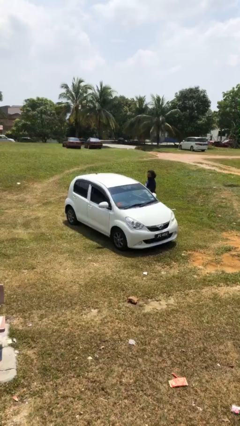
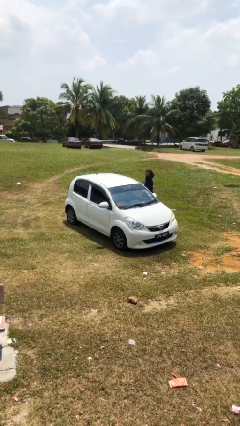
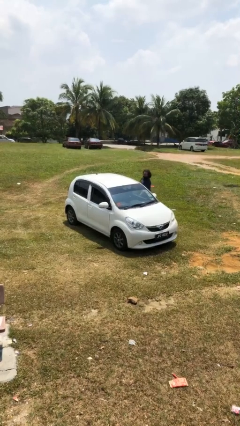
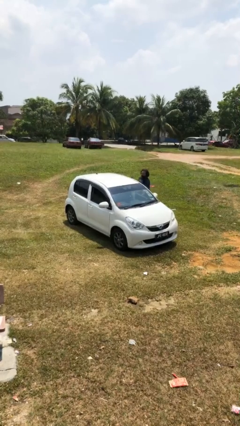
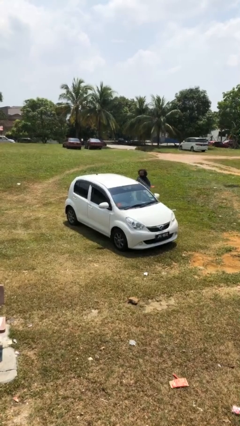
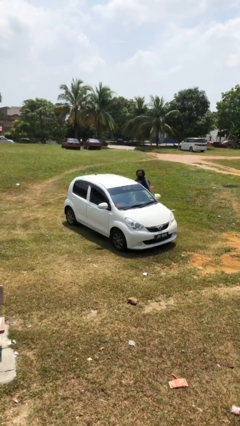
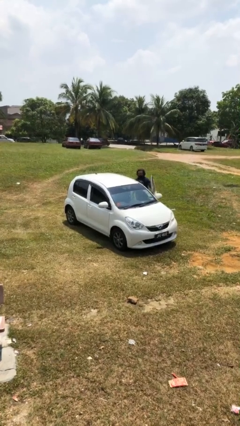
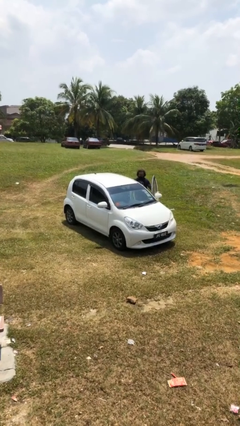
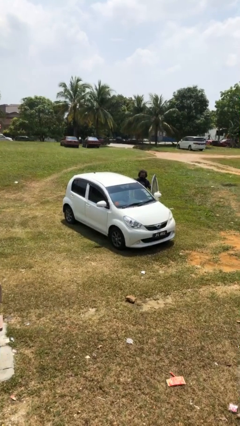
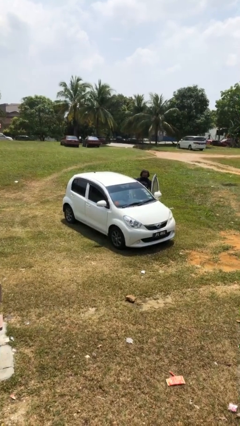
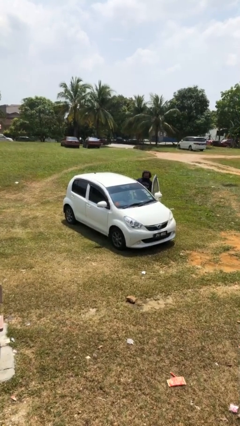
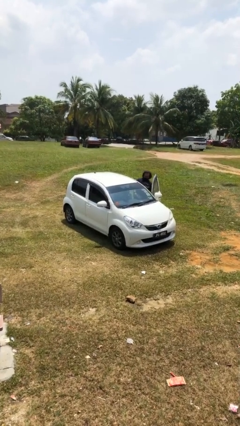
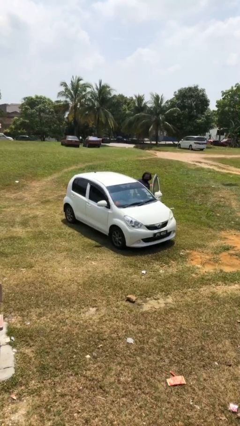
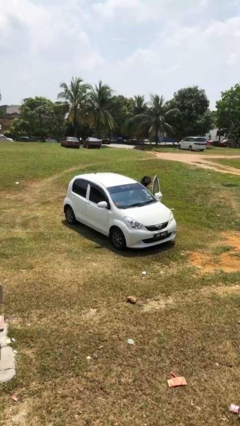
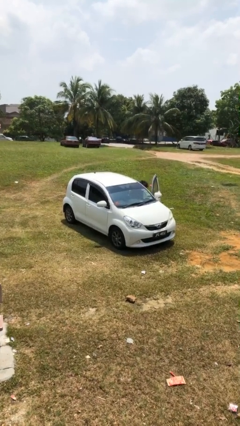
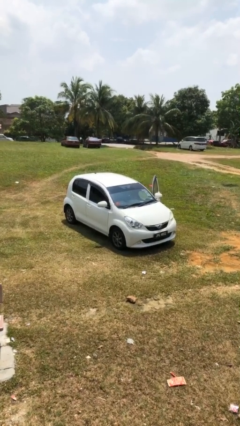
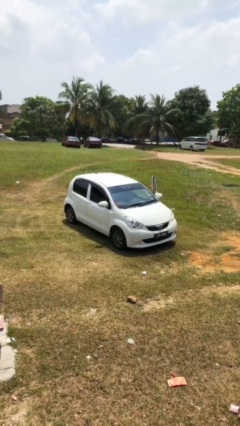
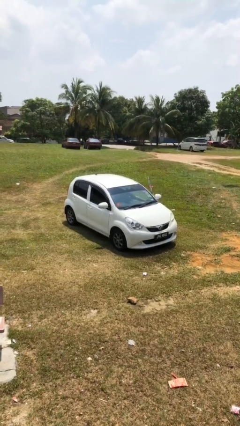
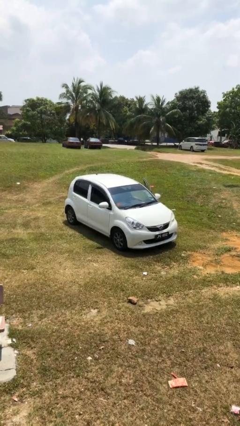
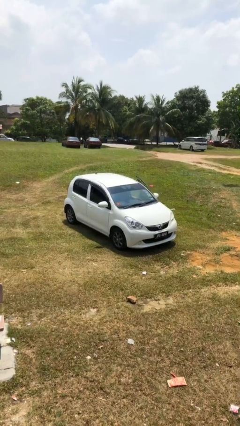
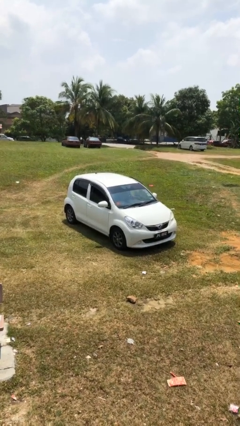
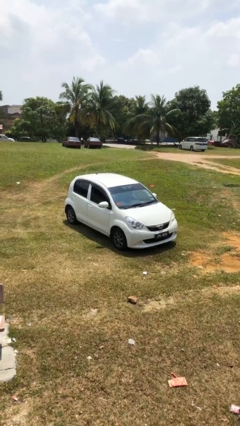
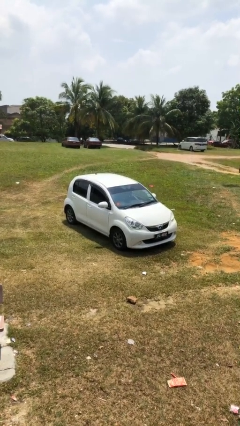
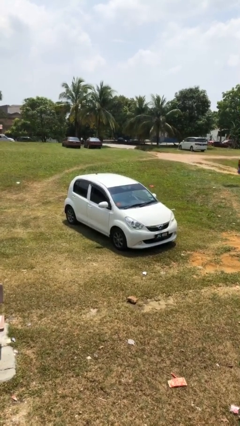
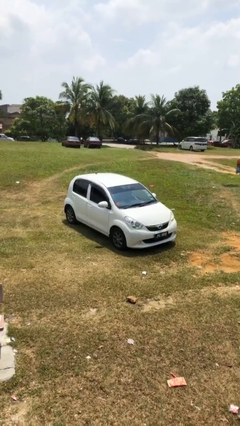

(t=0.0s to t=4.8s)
car picks up person

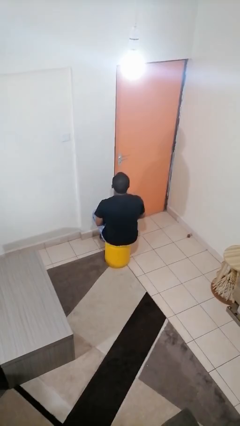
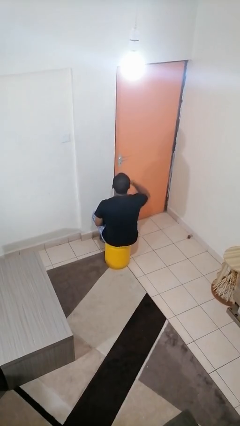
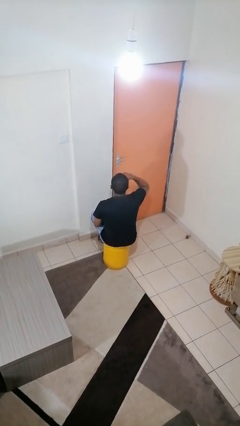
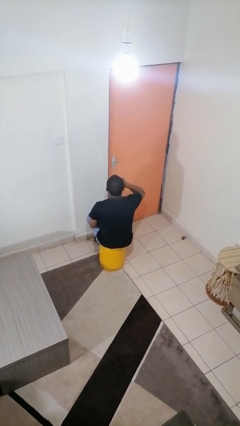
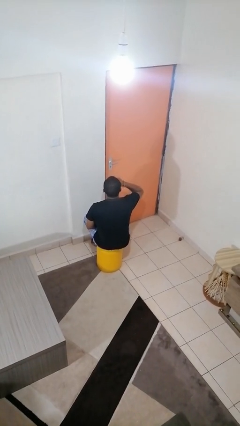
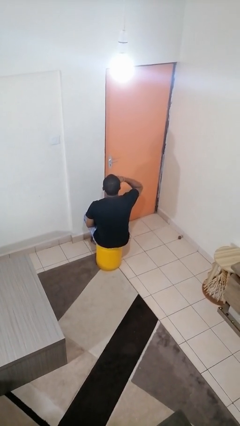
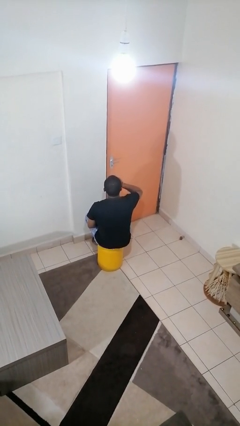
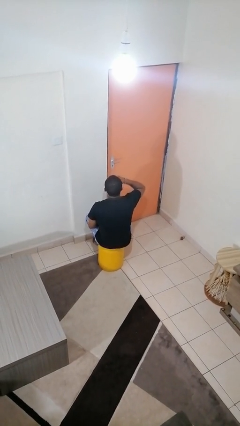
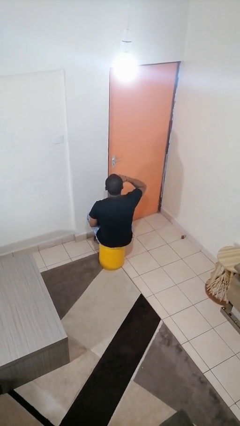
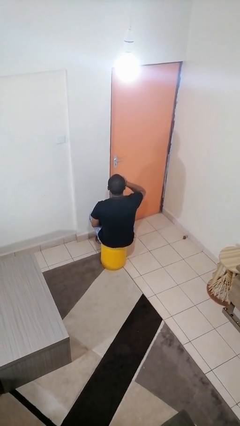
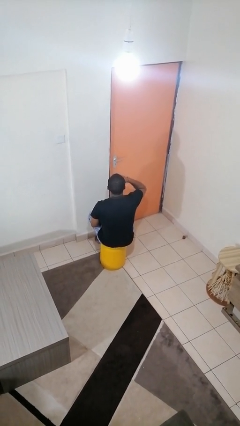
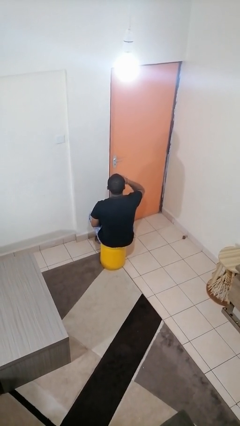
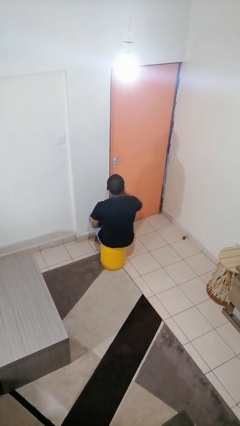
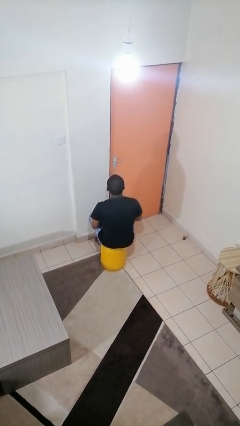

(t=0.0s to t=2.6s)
person rubs eyes

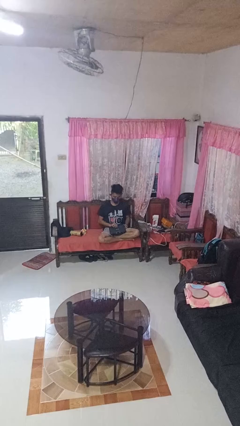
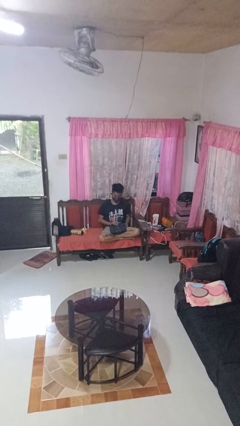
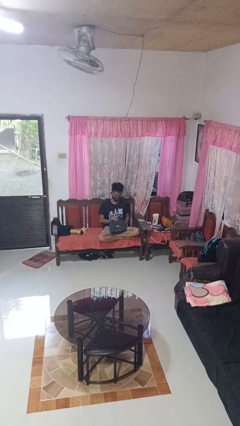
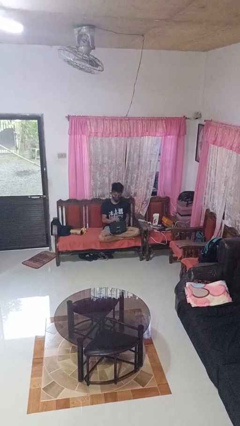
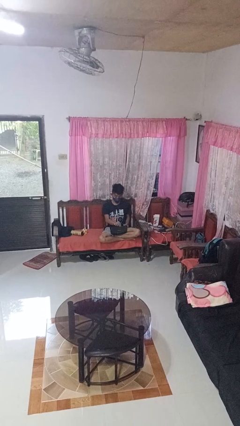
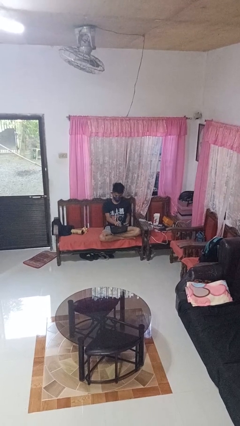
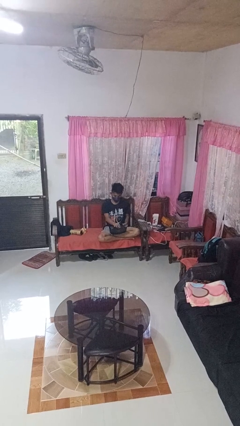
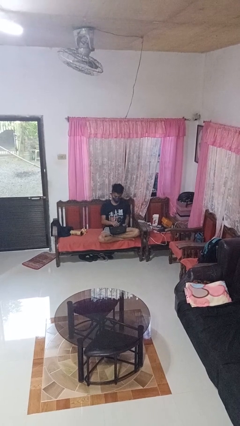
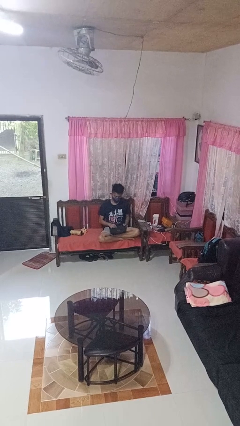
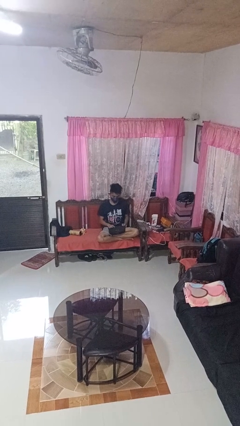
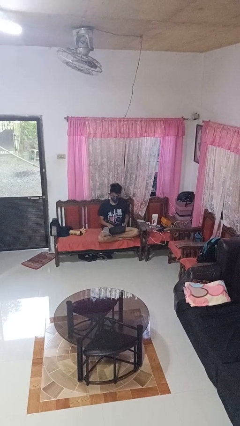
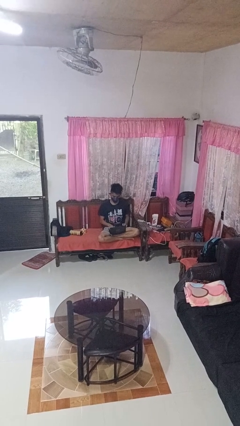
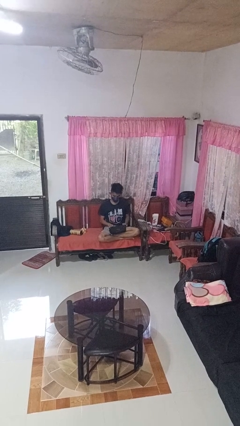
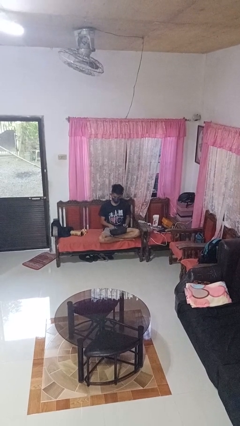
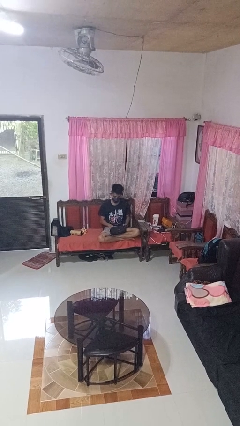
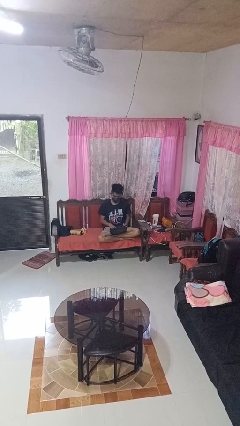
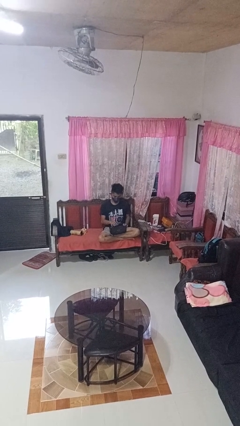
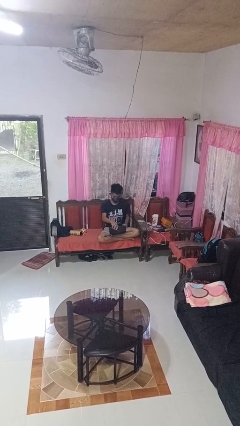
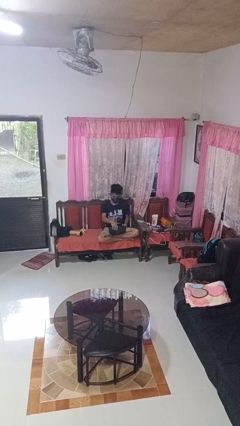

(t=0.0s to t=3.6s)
person opens laptop

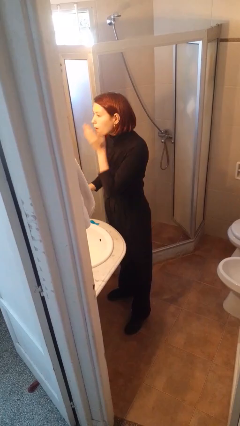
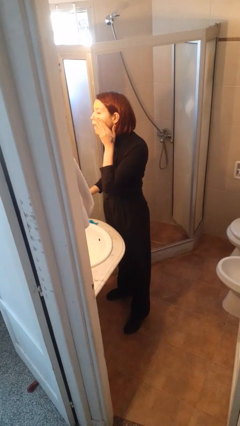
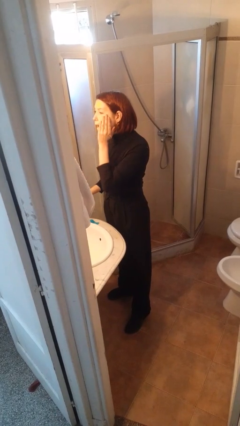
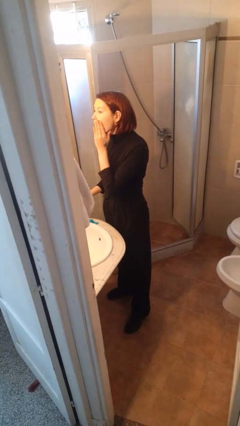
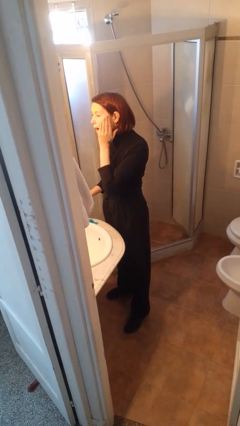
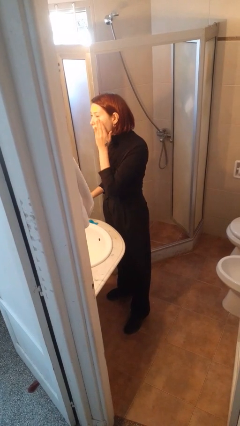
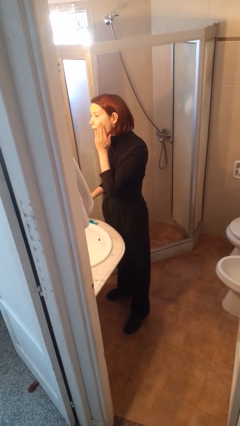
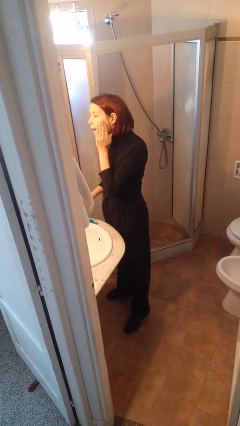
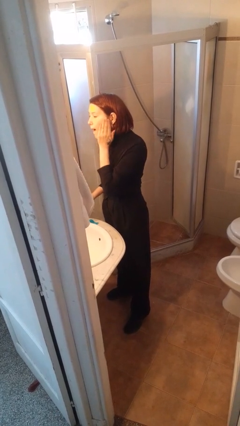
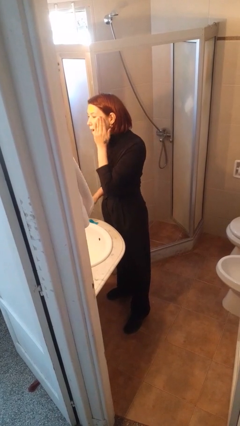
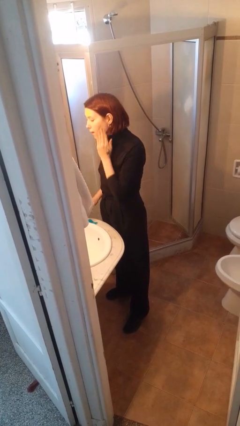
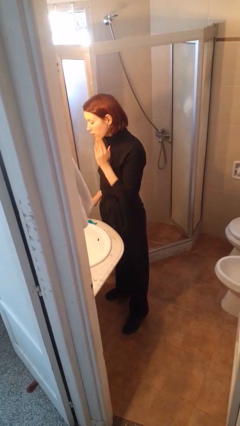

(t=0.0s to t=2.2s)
person applies shaving cream

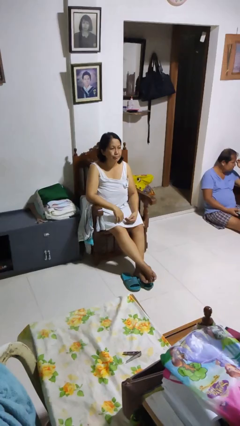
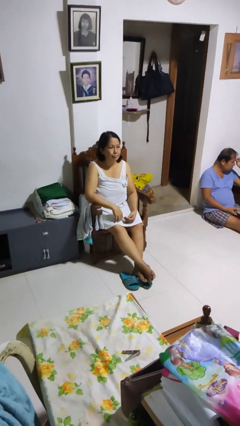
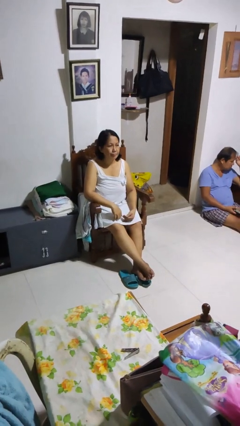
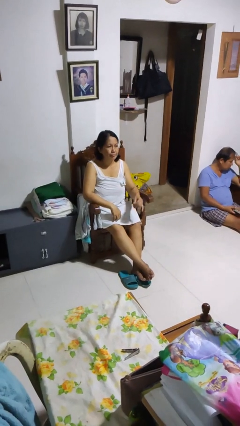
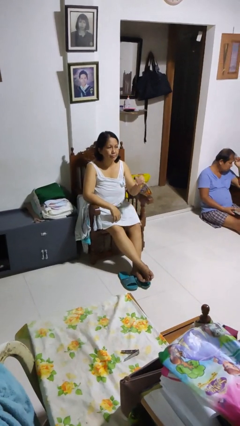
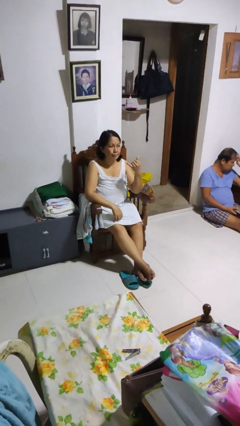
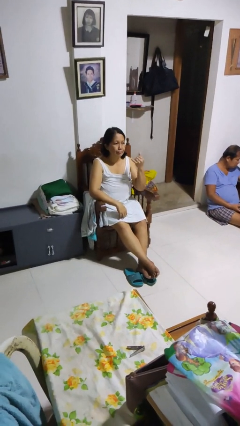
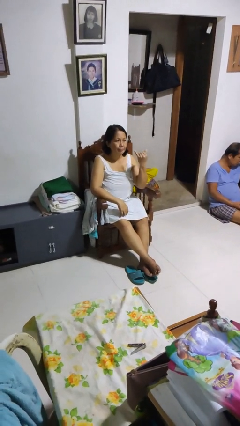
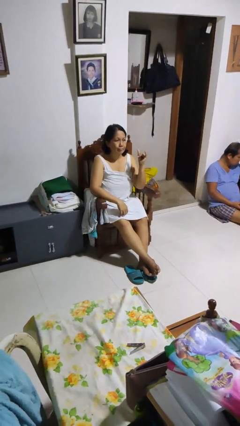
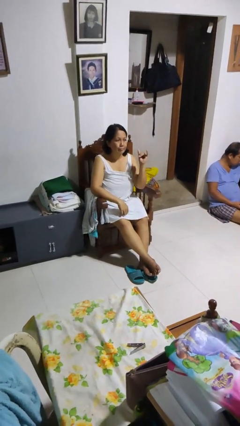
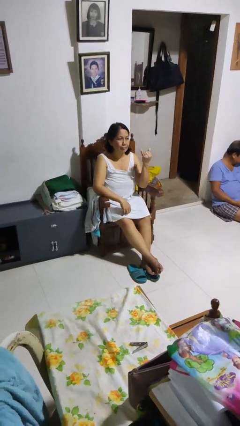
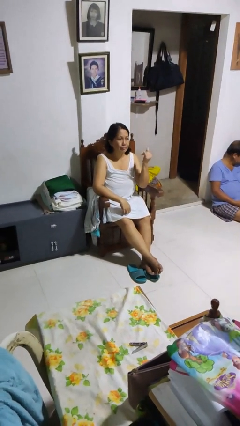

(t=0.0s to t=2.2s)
person gestures hang loose

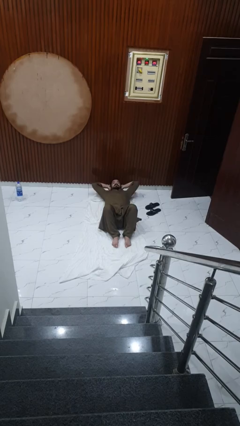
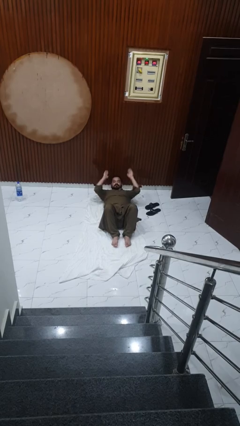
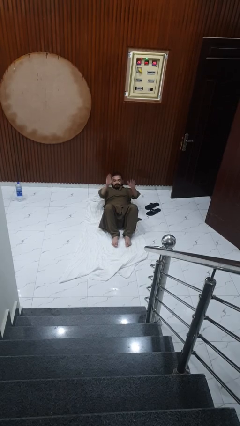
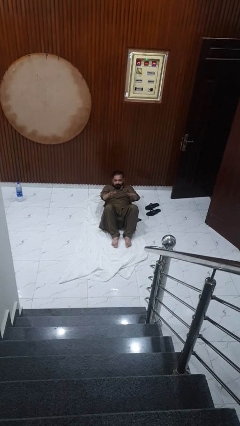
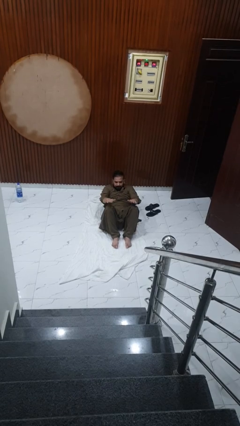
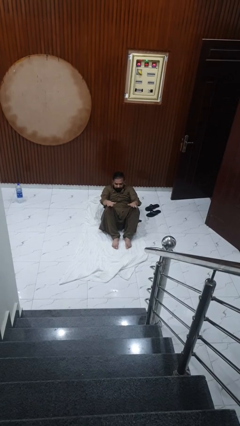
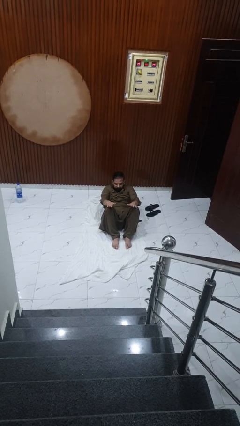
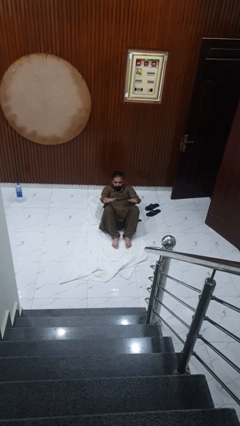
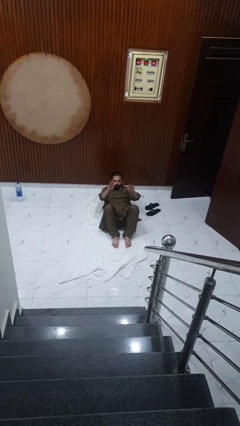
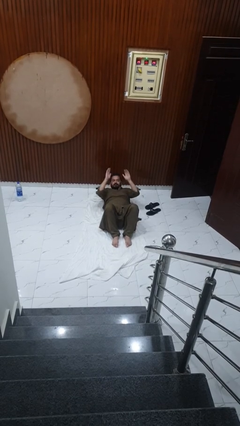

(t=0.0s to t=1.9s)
person exercises with situp
